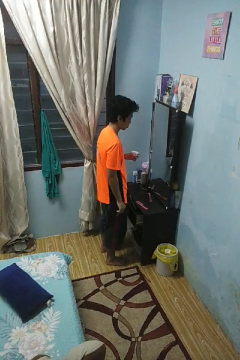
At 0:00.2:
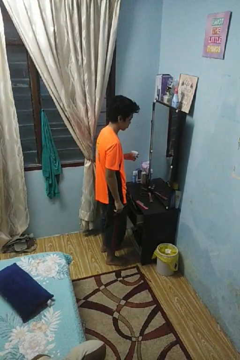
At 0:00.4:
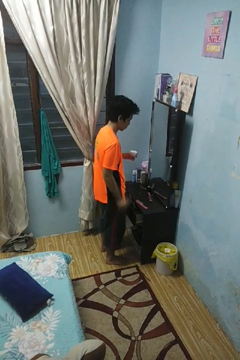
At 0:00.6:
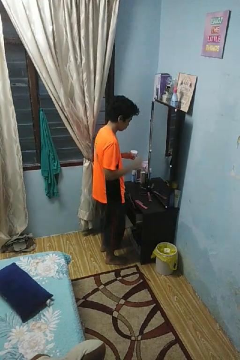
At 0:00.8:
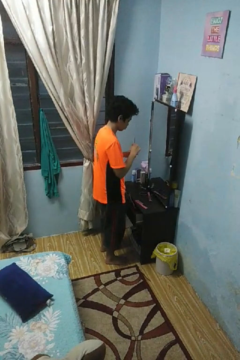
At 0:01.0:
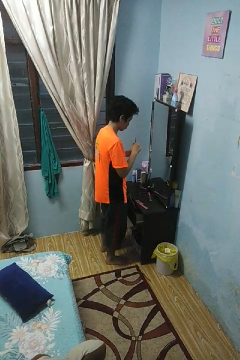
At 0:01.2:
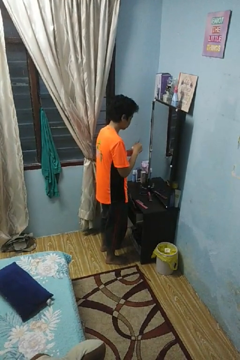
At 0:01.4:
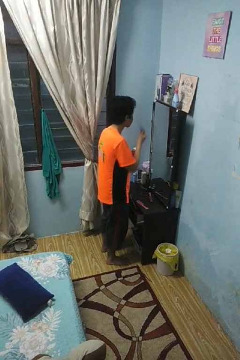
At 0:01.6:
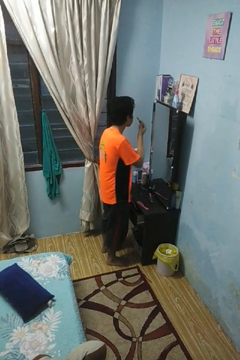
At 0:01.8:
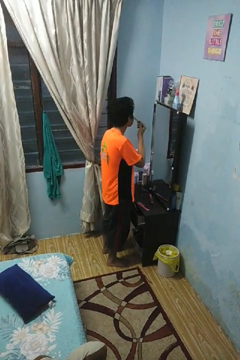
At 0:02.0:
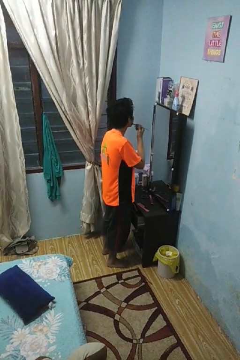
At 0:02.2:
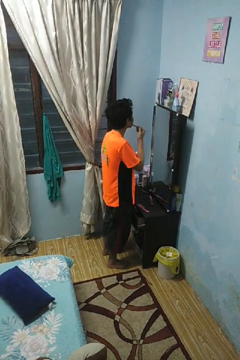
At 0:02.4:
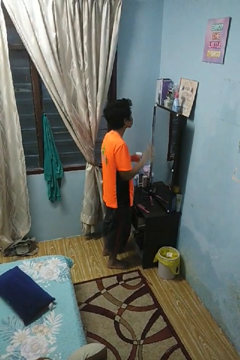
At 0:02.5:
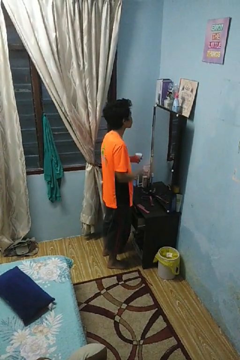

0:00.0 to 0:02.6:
person applies foundation makeup

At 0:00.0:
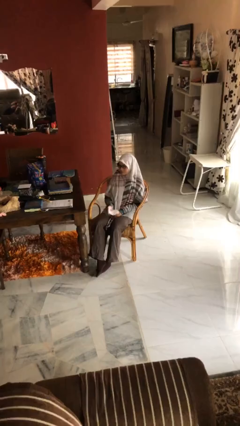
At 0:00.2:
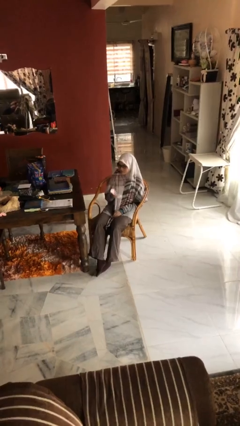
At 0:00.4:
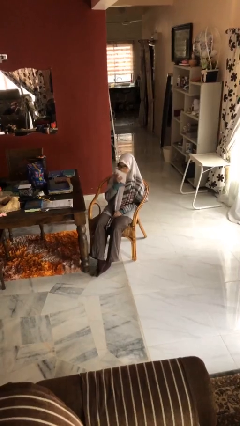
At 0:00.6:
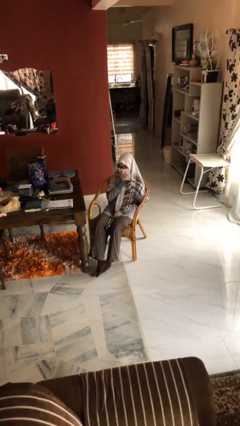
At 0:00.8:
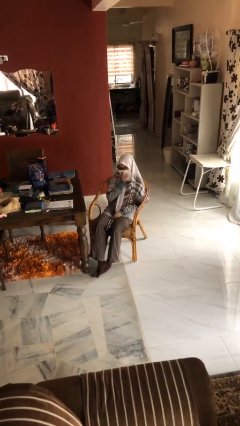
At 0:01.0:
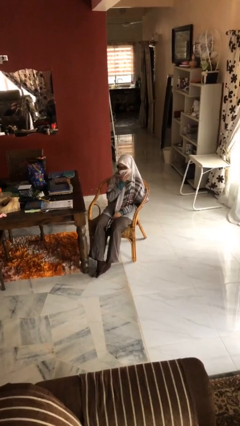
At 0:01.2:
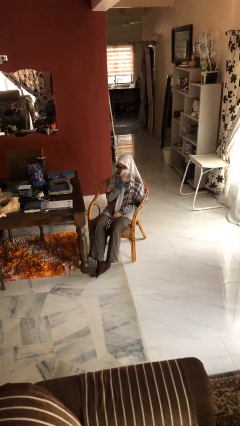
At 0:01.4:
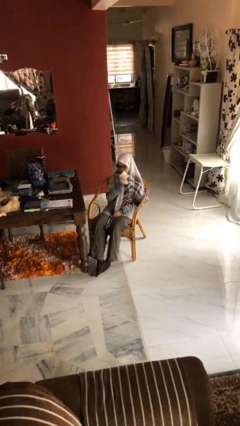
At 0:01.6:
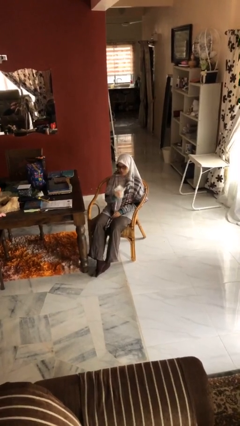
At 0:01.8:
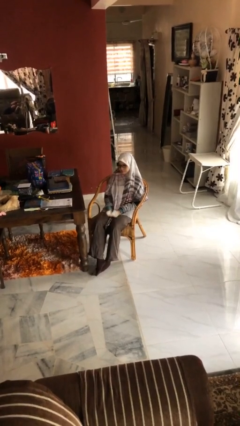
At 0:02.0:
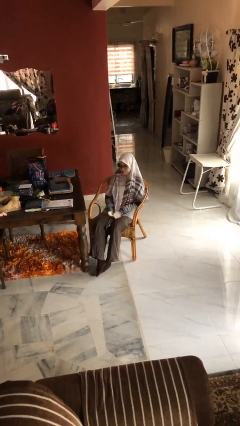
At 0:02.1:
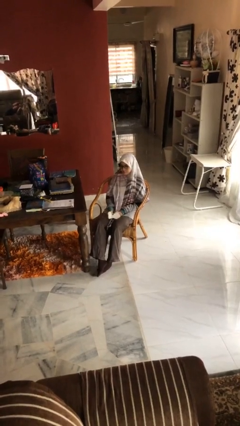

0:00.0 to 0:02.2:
person wipes mouth with napkin

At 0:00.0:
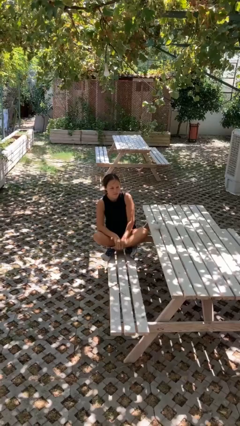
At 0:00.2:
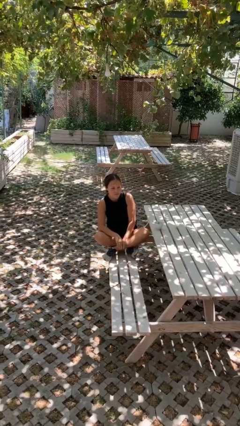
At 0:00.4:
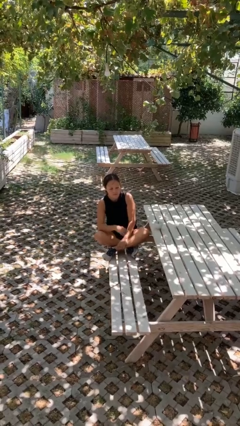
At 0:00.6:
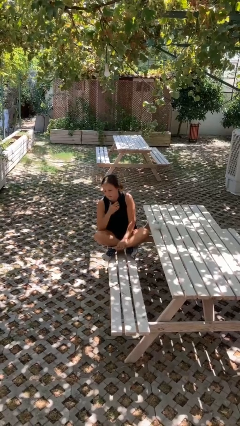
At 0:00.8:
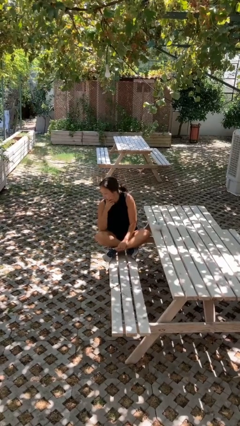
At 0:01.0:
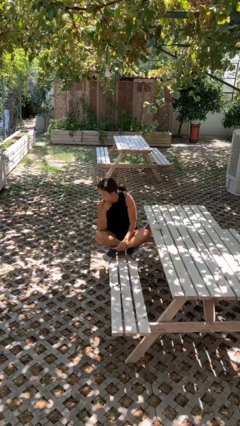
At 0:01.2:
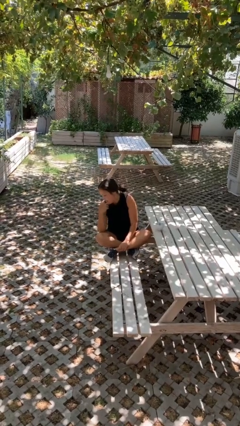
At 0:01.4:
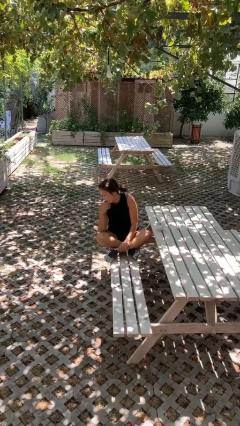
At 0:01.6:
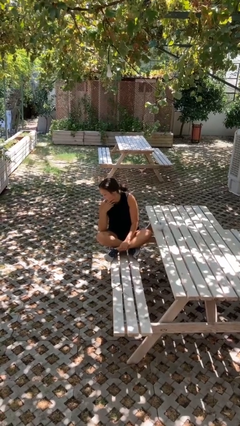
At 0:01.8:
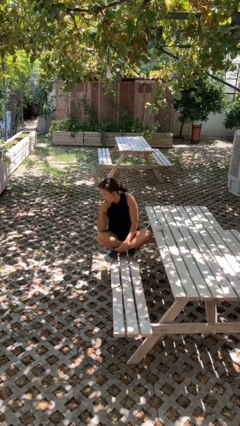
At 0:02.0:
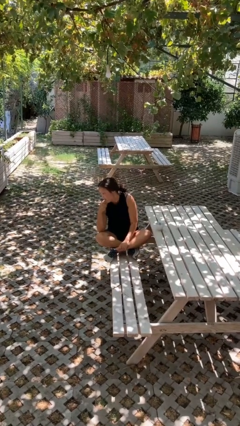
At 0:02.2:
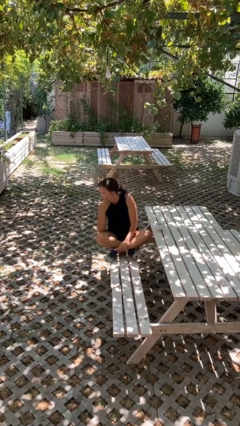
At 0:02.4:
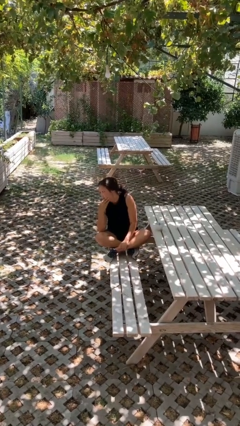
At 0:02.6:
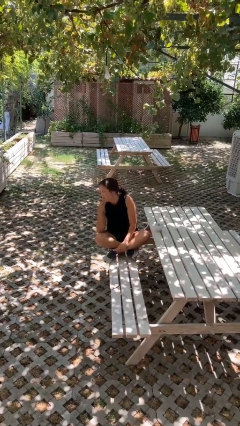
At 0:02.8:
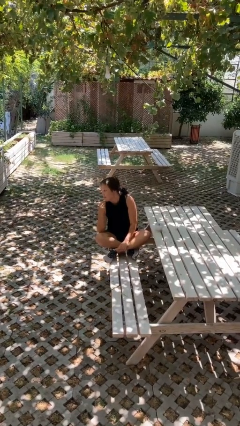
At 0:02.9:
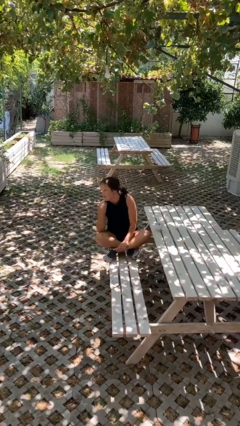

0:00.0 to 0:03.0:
person strokes chin

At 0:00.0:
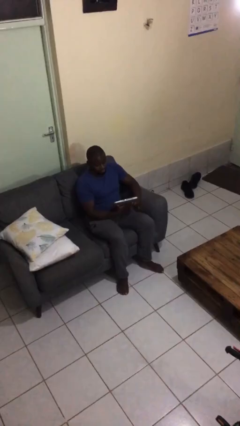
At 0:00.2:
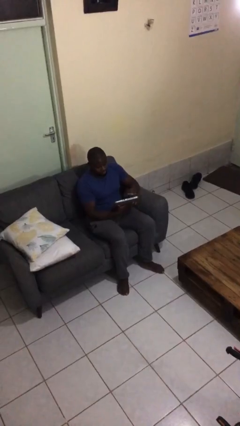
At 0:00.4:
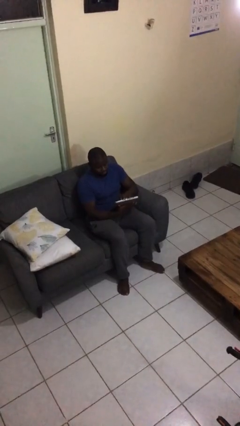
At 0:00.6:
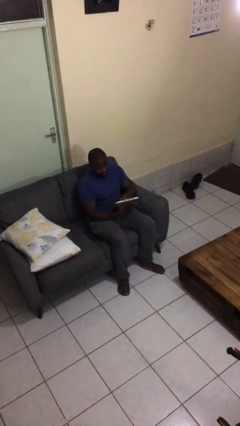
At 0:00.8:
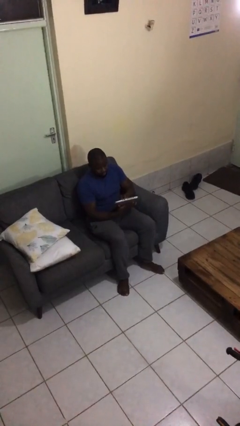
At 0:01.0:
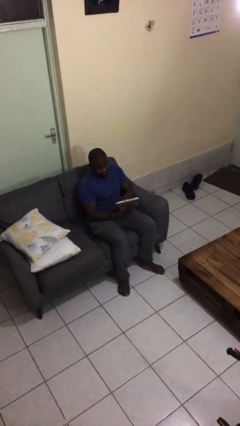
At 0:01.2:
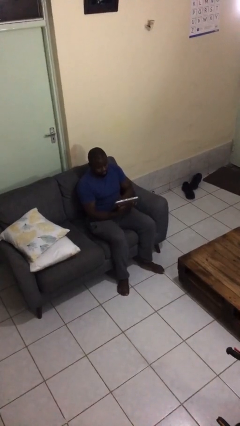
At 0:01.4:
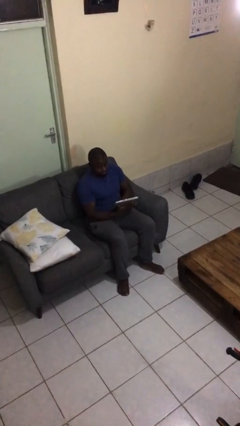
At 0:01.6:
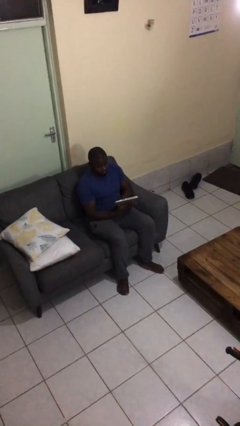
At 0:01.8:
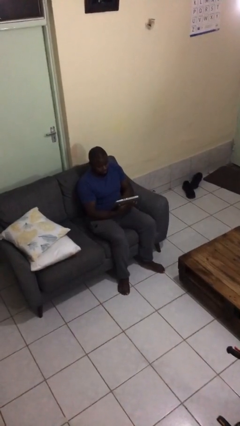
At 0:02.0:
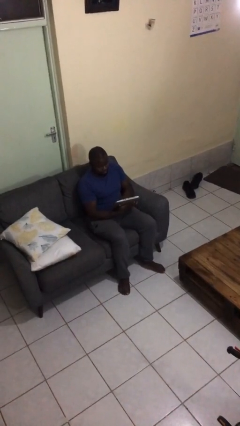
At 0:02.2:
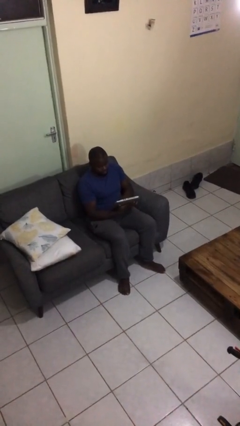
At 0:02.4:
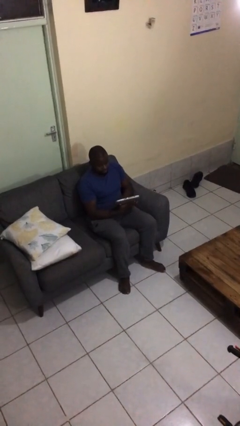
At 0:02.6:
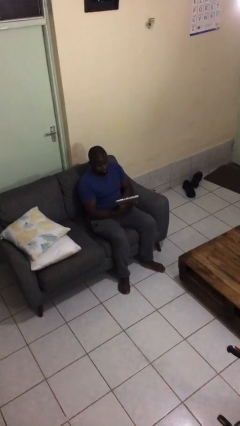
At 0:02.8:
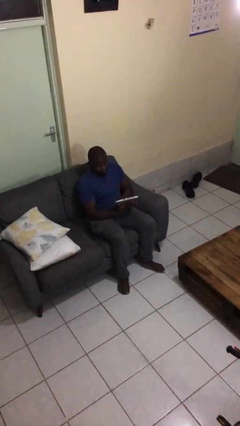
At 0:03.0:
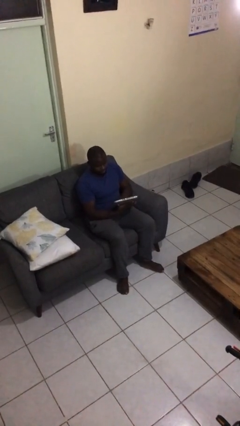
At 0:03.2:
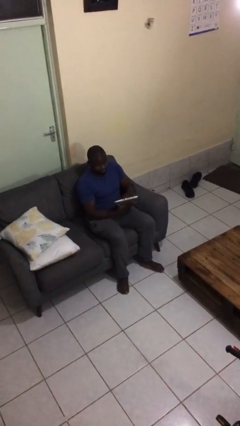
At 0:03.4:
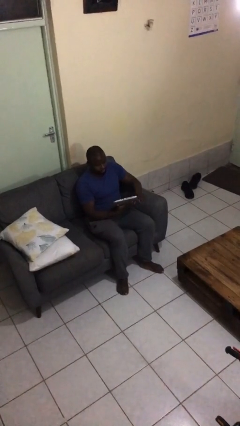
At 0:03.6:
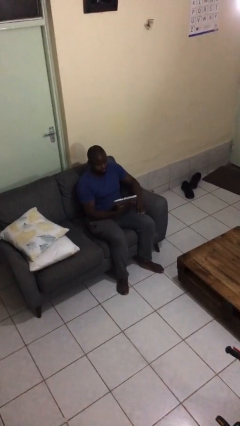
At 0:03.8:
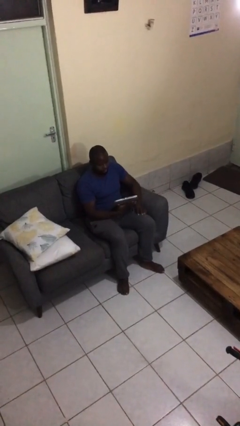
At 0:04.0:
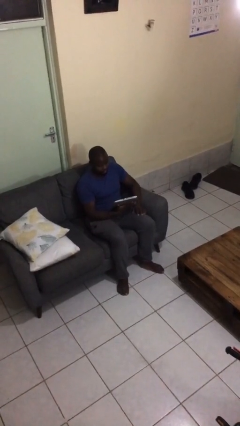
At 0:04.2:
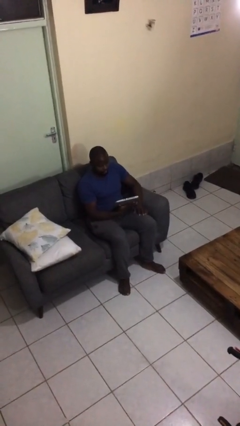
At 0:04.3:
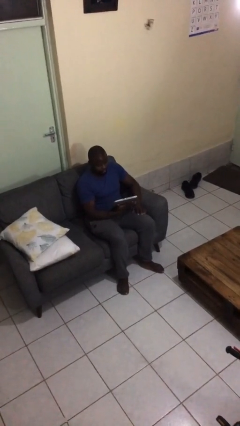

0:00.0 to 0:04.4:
person interacts with tablet

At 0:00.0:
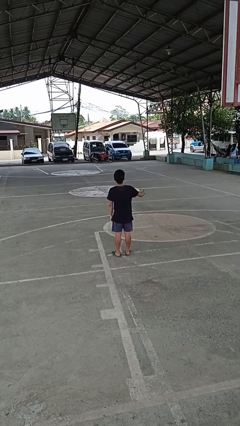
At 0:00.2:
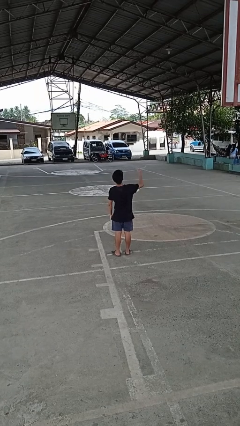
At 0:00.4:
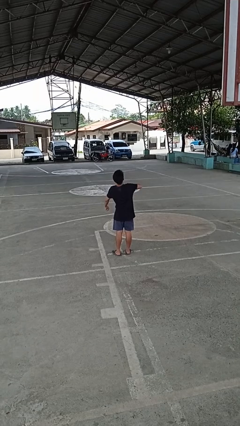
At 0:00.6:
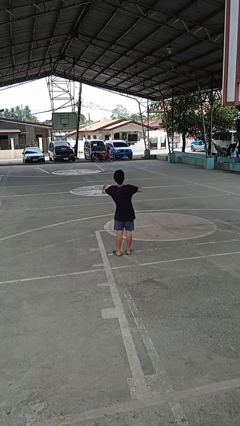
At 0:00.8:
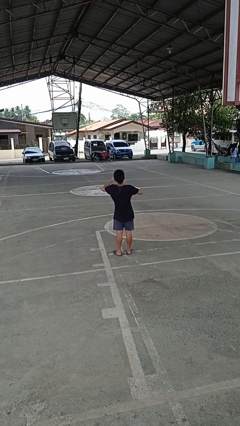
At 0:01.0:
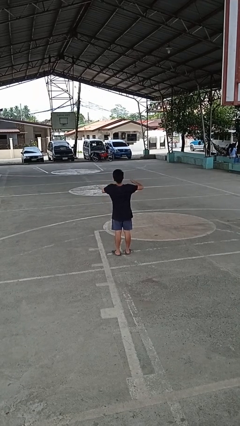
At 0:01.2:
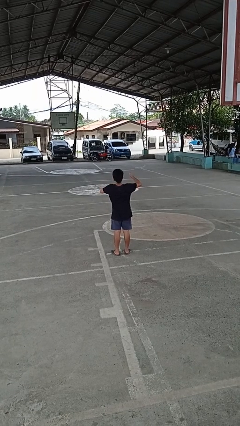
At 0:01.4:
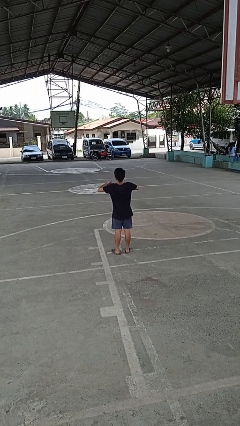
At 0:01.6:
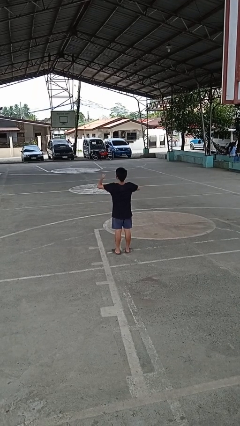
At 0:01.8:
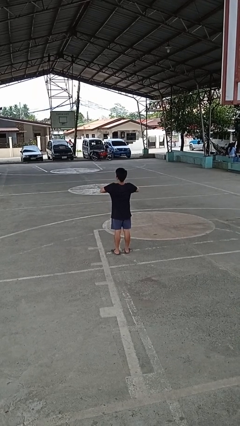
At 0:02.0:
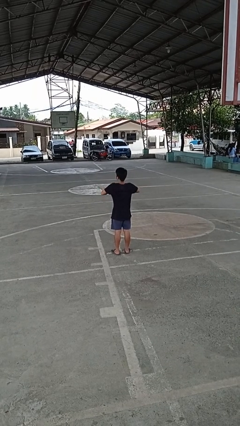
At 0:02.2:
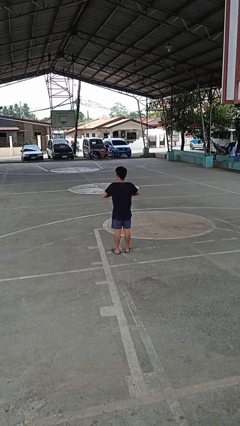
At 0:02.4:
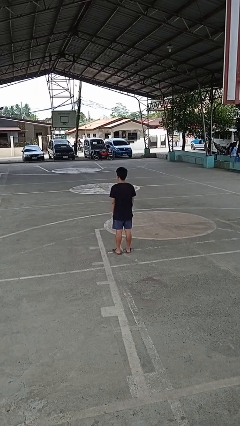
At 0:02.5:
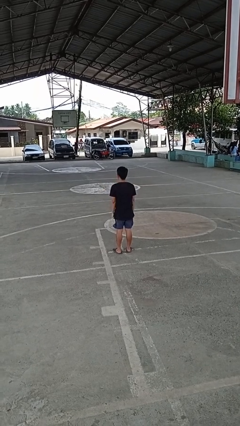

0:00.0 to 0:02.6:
person drums on chest

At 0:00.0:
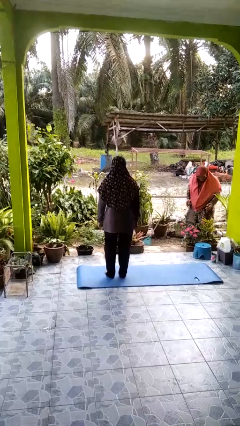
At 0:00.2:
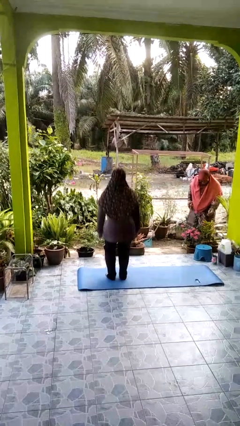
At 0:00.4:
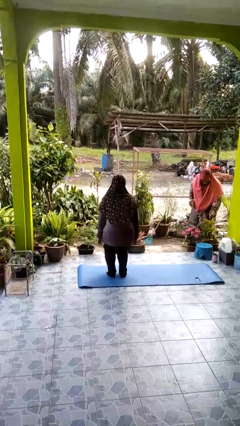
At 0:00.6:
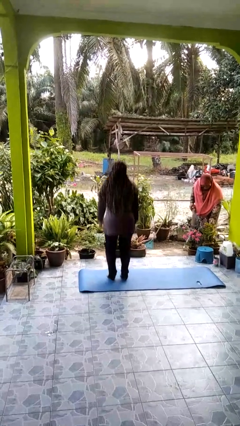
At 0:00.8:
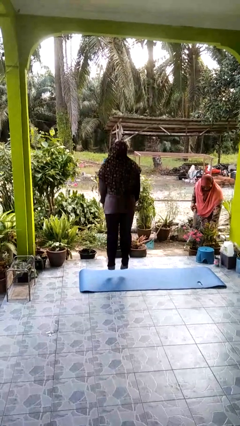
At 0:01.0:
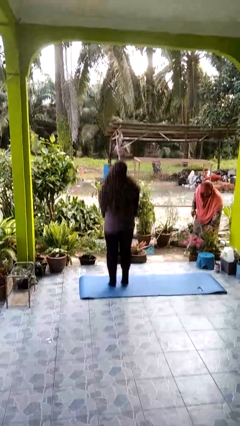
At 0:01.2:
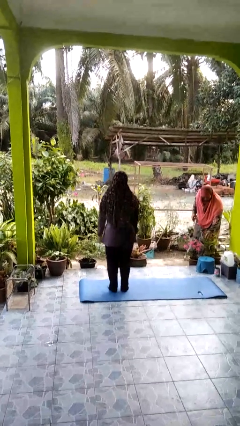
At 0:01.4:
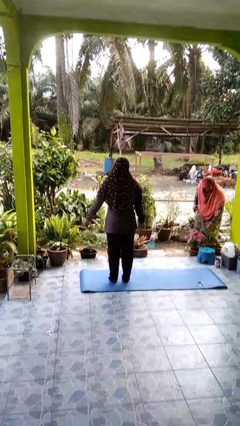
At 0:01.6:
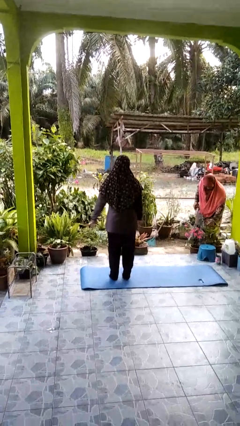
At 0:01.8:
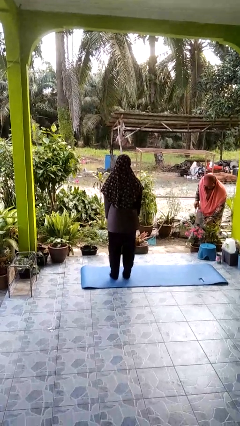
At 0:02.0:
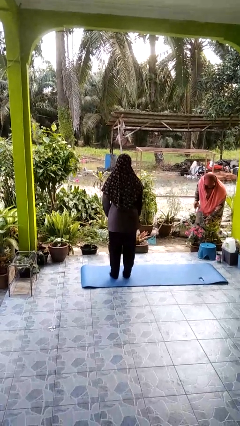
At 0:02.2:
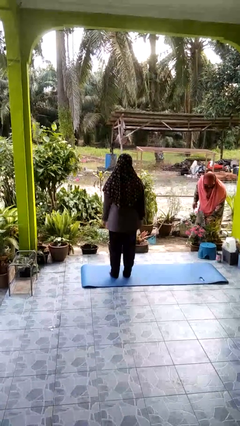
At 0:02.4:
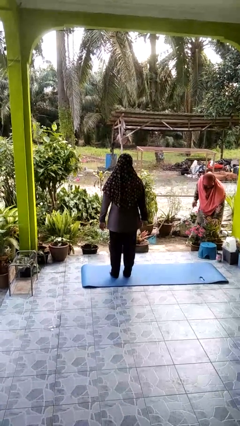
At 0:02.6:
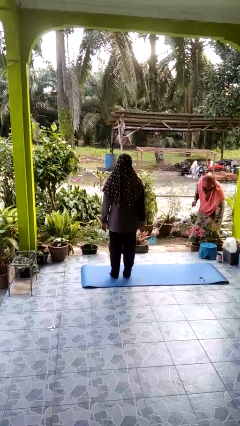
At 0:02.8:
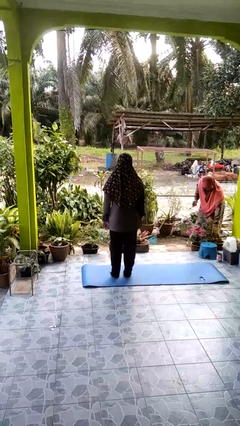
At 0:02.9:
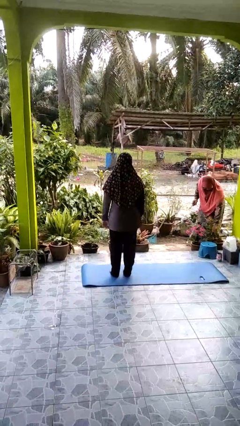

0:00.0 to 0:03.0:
person jumps

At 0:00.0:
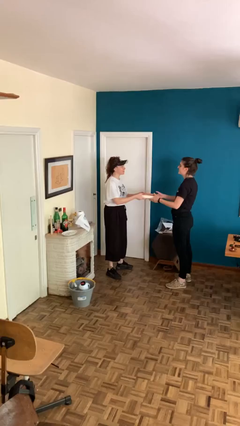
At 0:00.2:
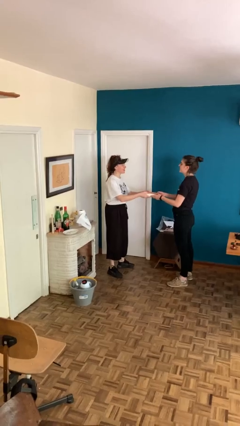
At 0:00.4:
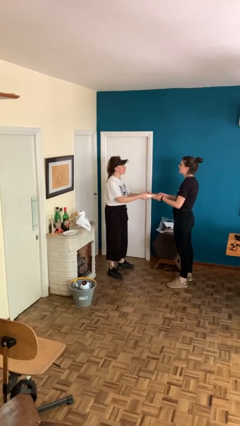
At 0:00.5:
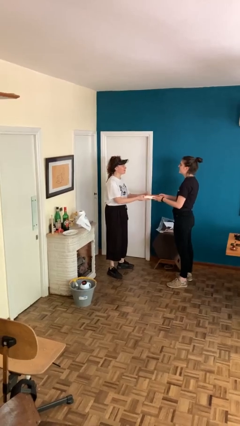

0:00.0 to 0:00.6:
person transfers object to person
